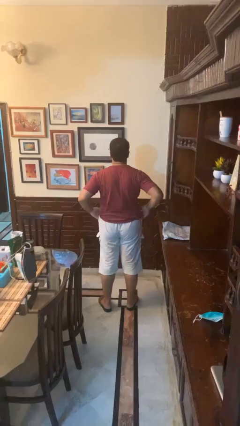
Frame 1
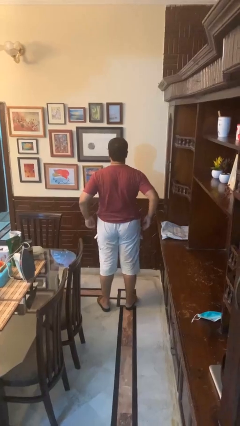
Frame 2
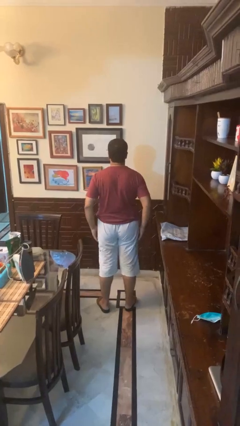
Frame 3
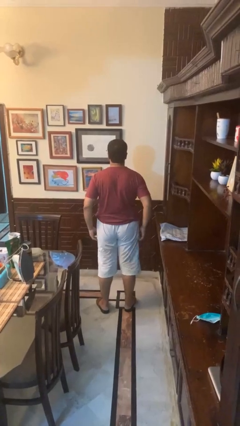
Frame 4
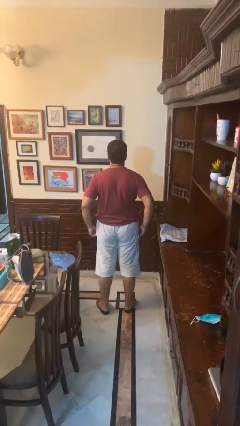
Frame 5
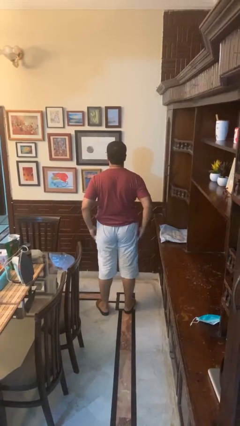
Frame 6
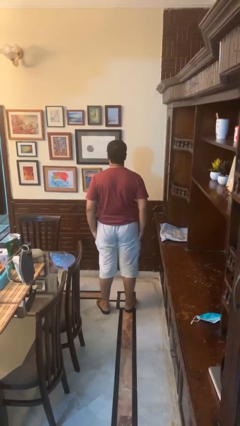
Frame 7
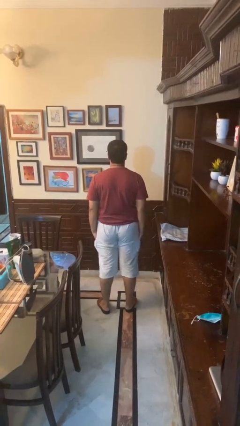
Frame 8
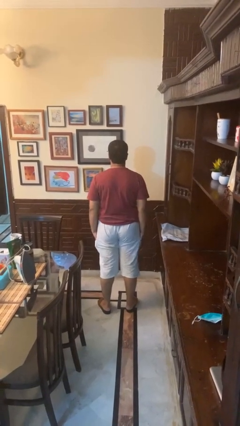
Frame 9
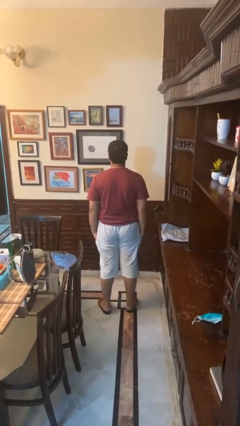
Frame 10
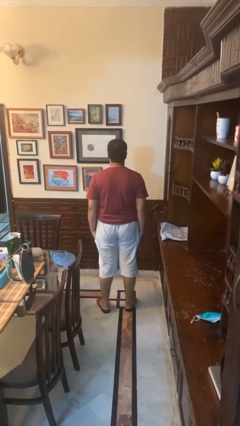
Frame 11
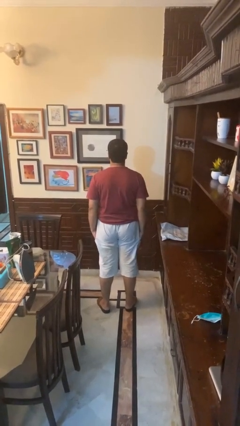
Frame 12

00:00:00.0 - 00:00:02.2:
person puts hands in back pockets

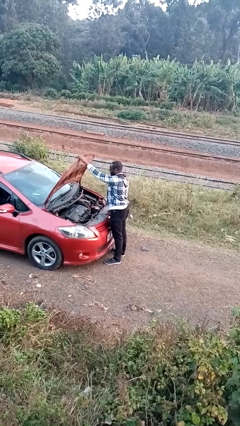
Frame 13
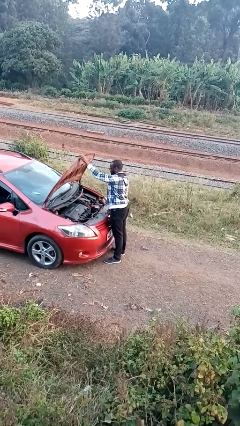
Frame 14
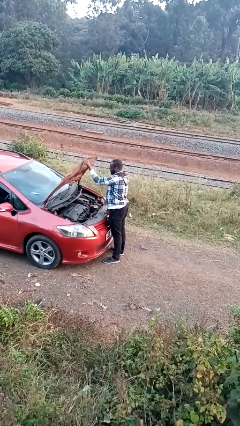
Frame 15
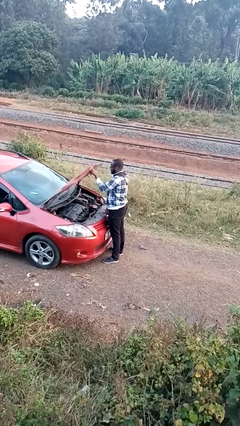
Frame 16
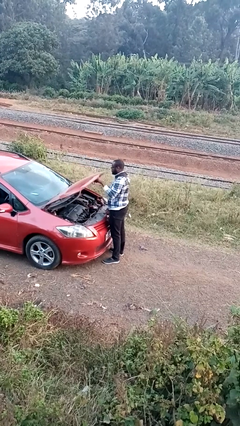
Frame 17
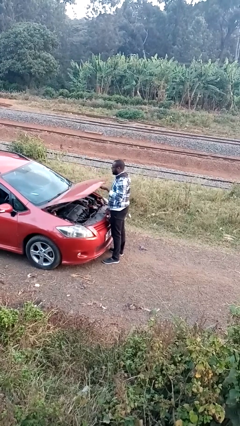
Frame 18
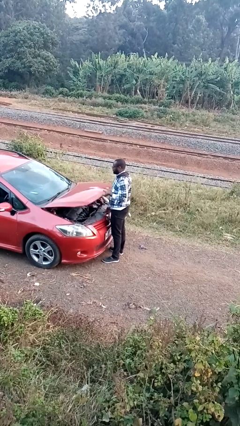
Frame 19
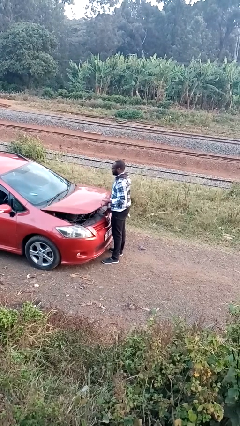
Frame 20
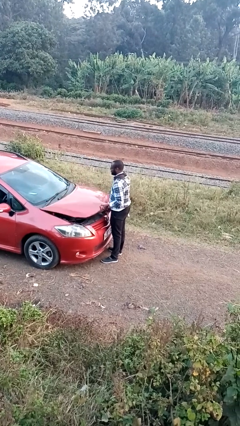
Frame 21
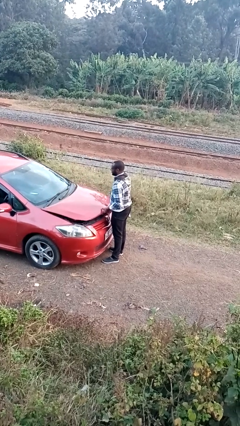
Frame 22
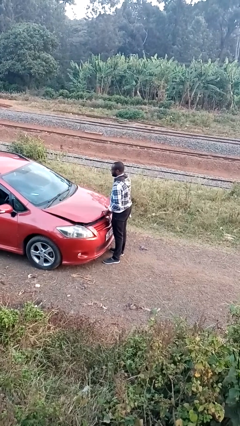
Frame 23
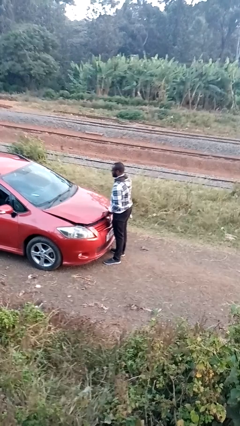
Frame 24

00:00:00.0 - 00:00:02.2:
person closes car hood

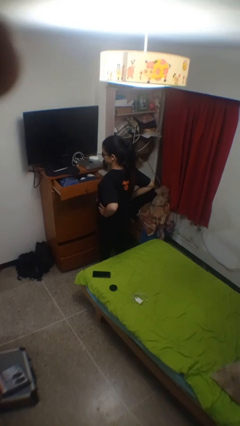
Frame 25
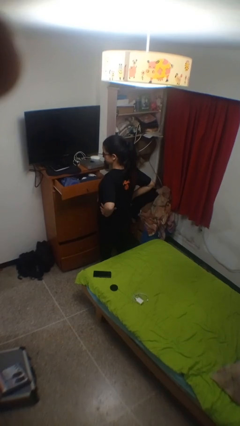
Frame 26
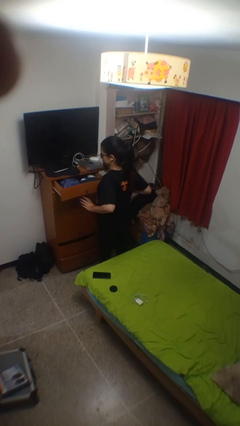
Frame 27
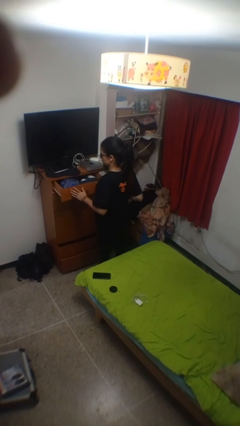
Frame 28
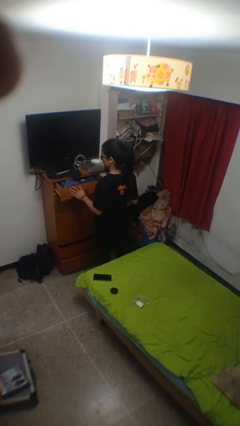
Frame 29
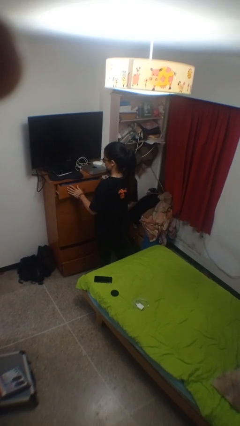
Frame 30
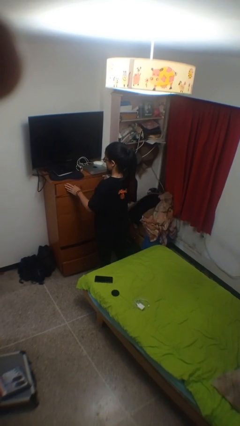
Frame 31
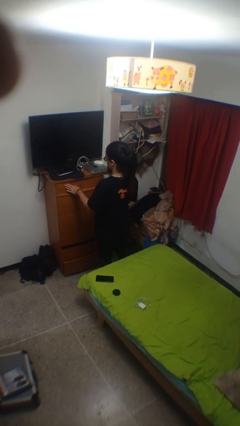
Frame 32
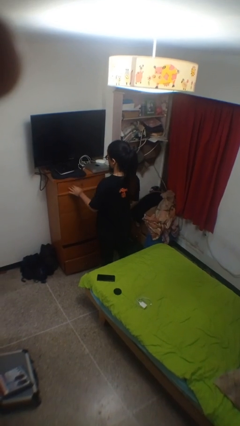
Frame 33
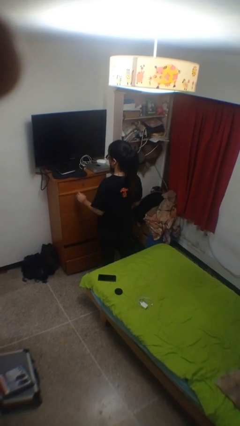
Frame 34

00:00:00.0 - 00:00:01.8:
person closes dresser drawer

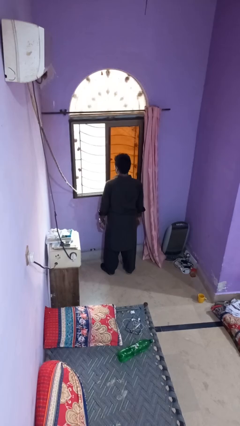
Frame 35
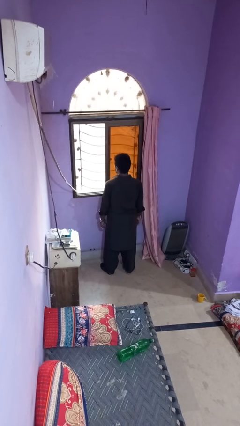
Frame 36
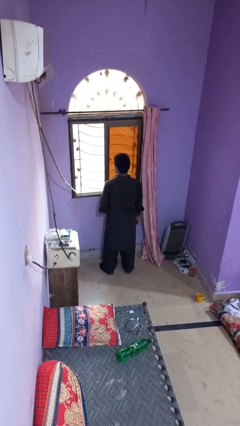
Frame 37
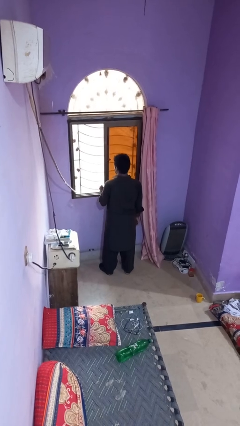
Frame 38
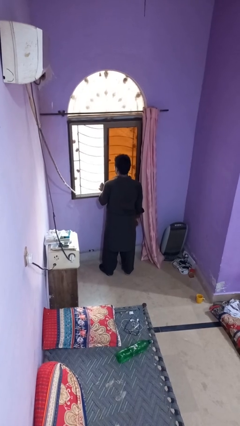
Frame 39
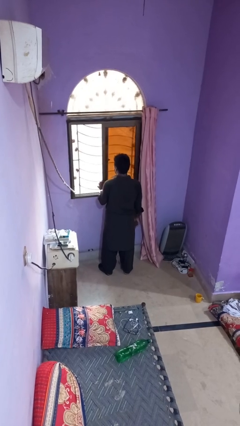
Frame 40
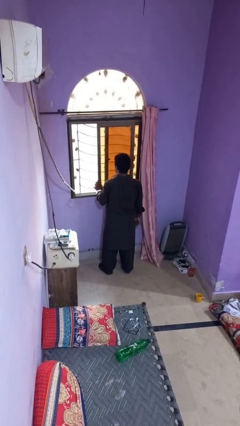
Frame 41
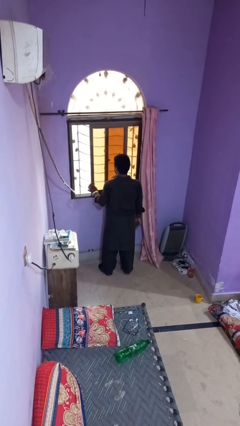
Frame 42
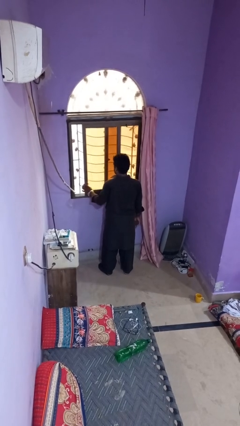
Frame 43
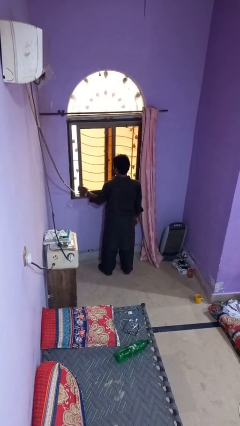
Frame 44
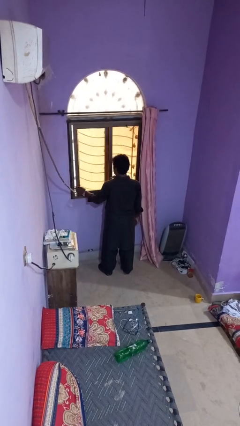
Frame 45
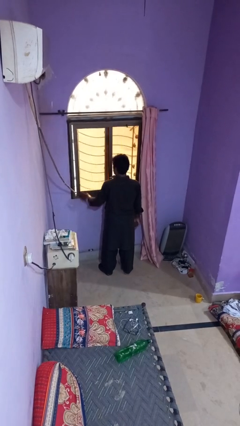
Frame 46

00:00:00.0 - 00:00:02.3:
person closes home window

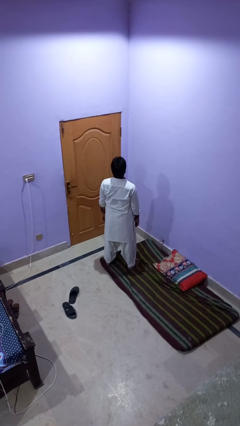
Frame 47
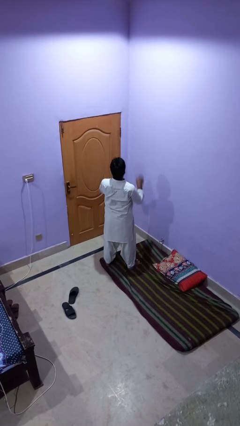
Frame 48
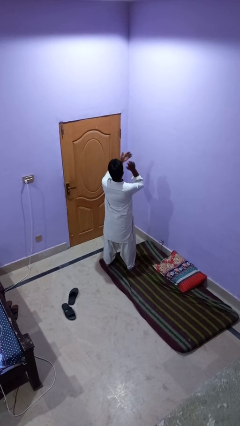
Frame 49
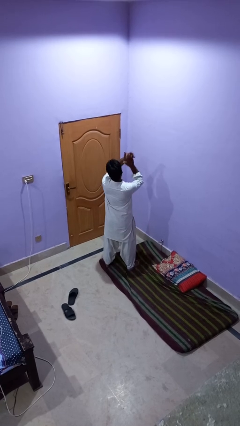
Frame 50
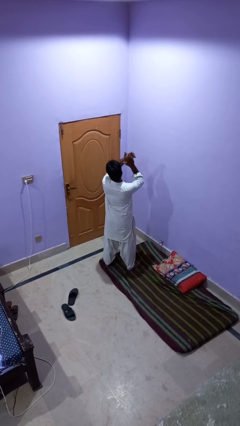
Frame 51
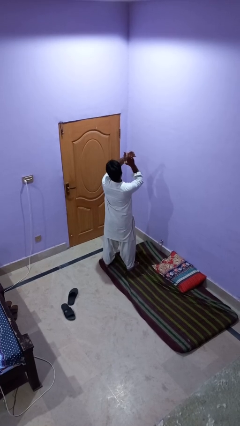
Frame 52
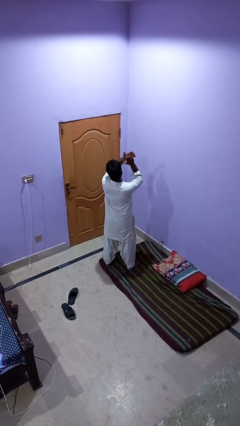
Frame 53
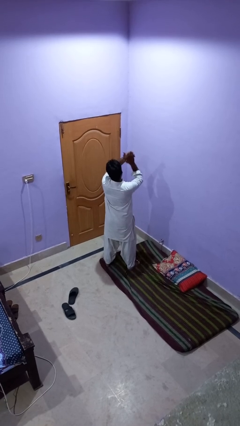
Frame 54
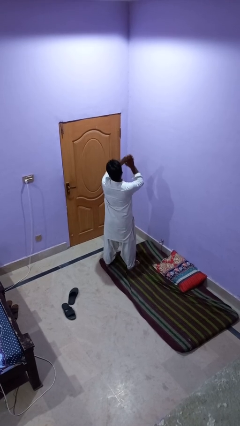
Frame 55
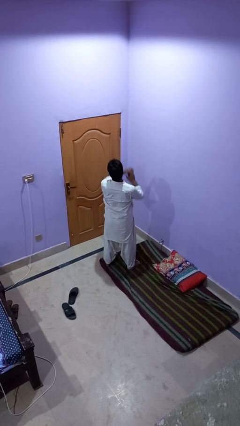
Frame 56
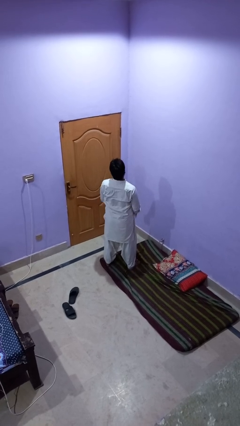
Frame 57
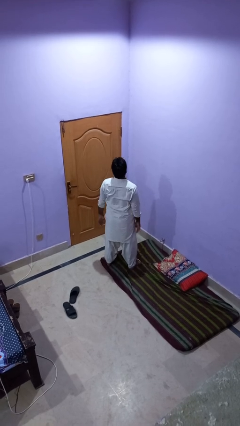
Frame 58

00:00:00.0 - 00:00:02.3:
person claps hands

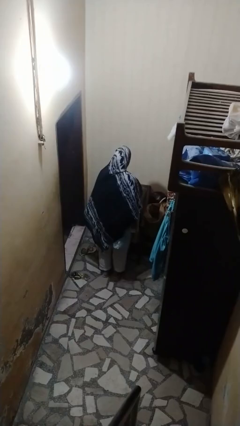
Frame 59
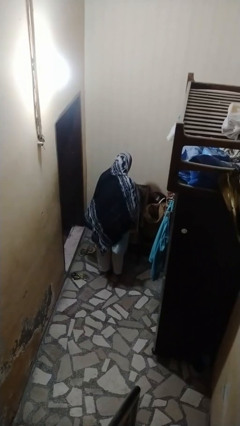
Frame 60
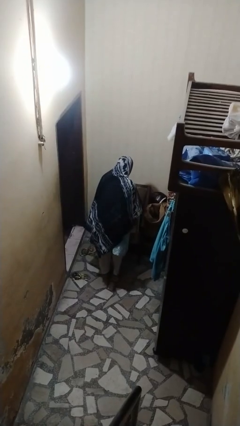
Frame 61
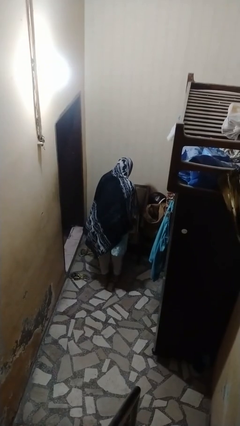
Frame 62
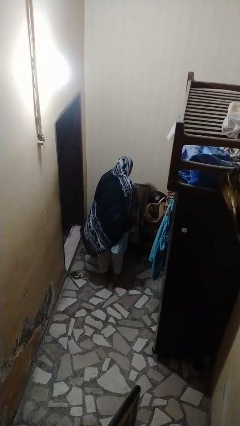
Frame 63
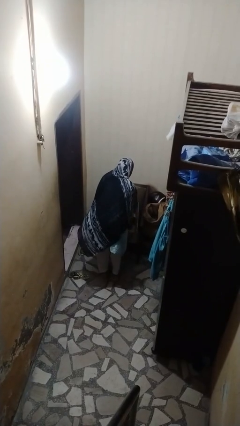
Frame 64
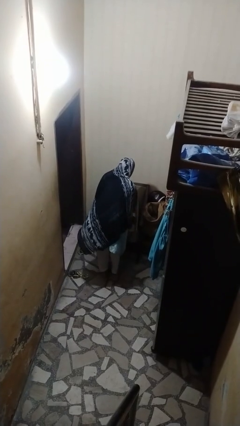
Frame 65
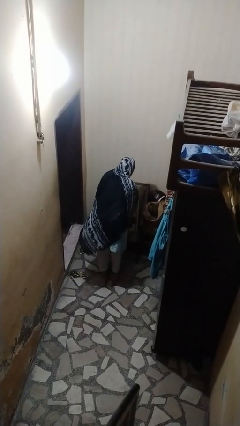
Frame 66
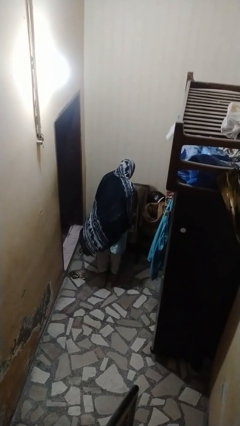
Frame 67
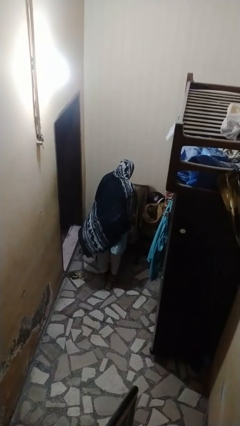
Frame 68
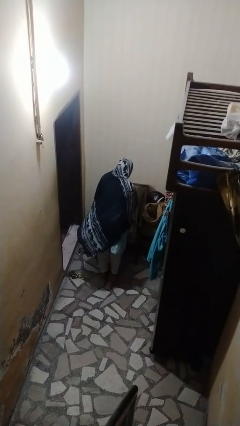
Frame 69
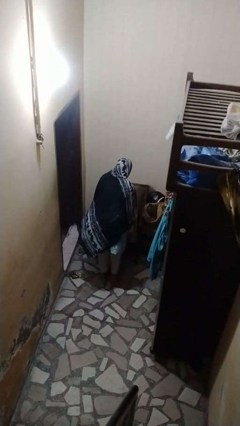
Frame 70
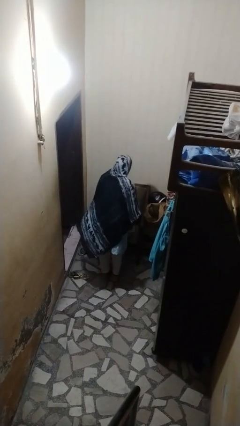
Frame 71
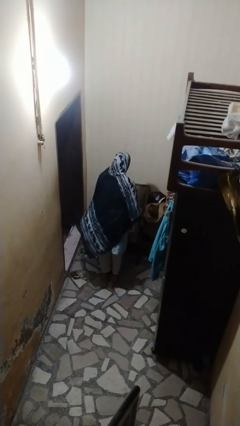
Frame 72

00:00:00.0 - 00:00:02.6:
person searches in box

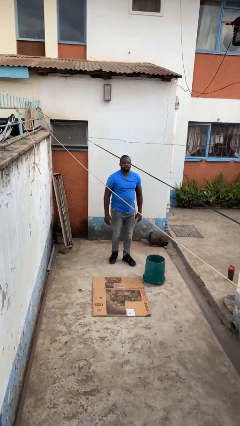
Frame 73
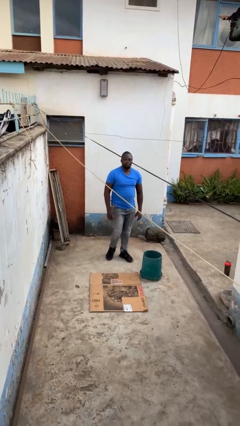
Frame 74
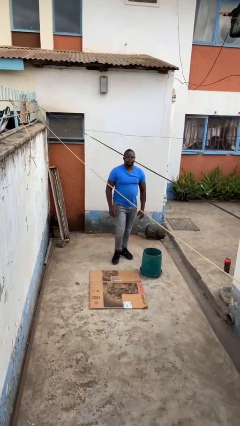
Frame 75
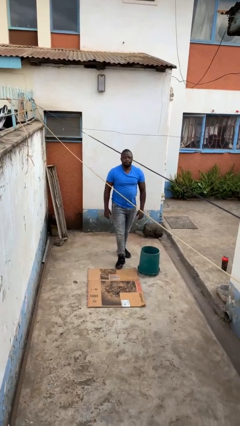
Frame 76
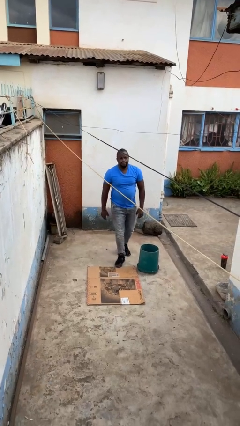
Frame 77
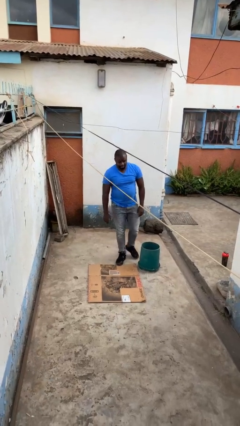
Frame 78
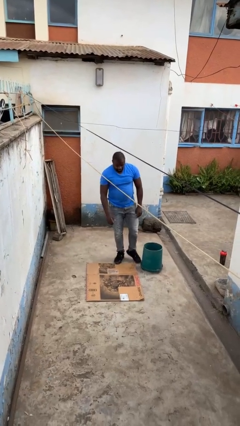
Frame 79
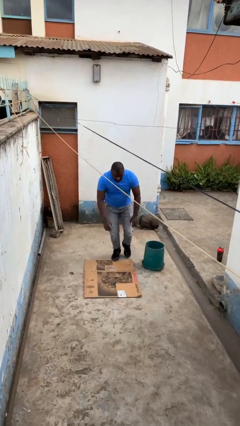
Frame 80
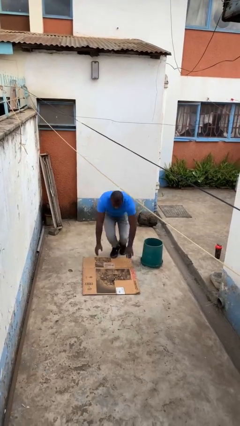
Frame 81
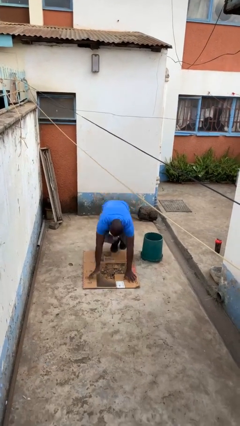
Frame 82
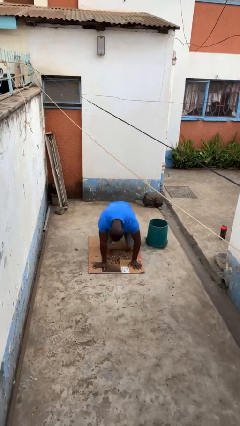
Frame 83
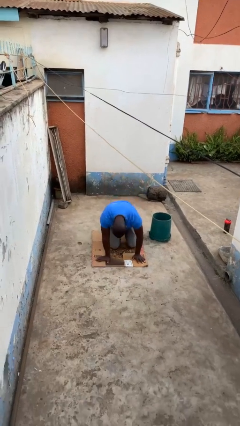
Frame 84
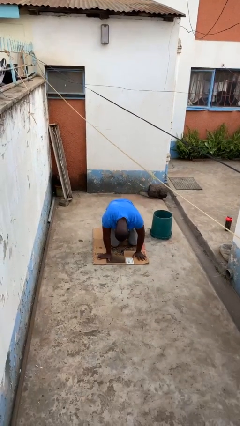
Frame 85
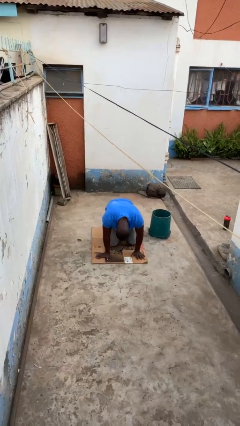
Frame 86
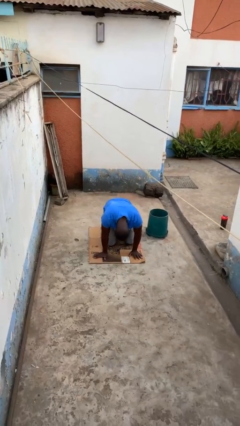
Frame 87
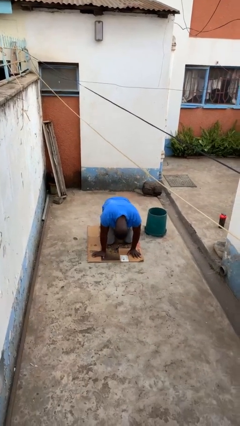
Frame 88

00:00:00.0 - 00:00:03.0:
person trips on object on floor

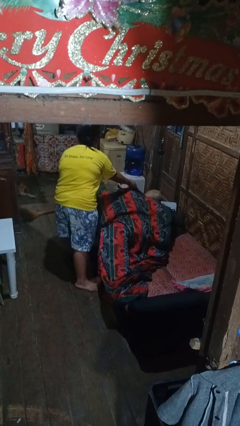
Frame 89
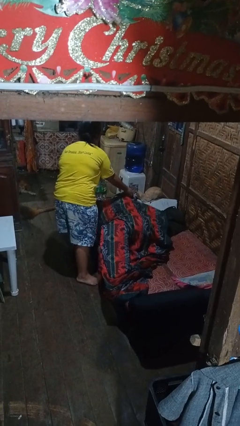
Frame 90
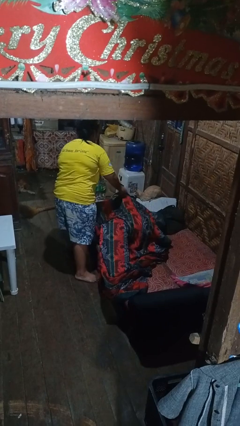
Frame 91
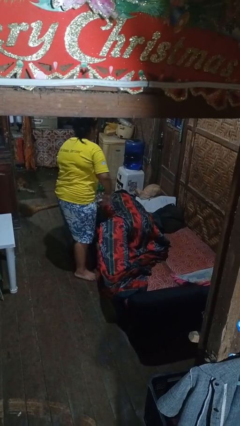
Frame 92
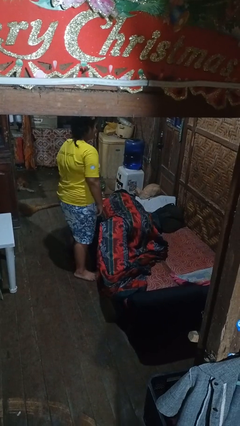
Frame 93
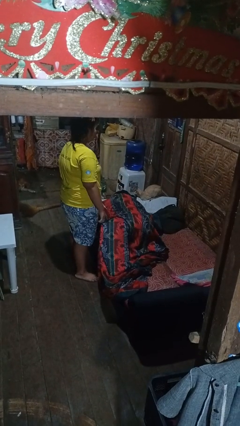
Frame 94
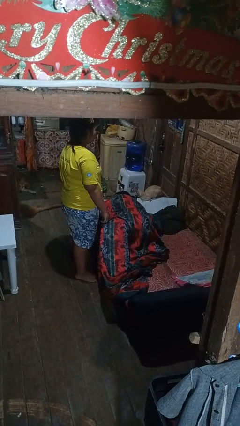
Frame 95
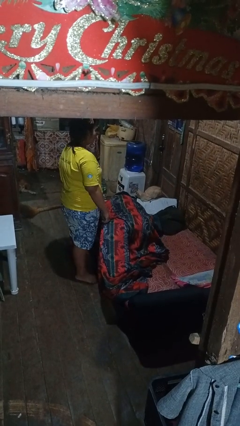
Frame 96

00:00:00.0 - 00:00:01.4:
person covers friend with blanket
